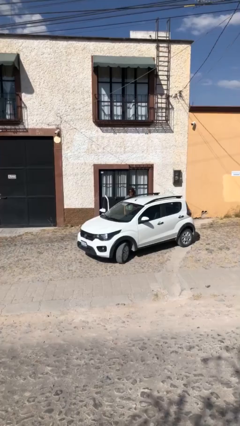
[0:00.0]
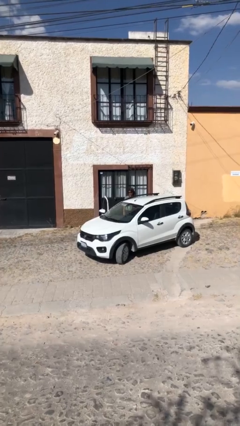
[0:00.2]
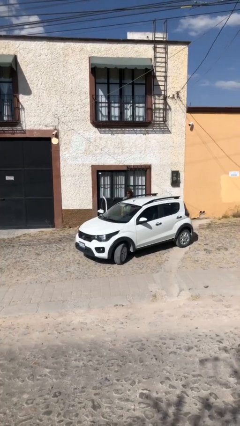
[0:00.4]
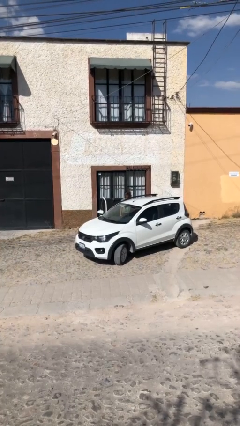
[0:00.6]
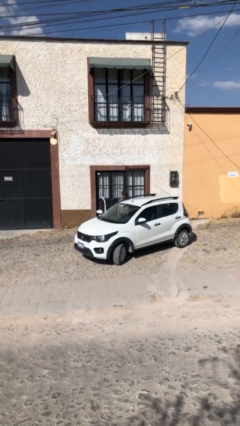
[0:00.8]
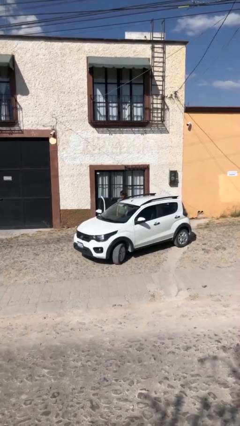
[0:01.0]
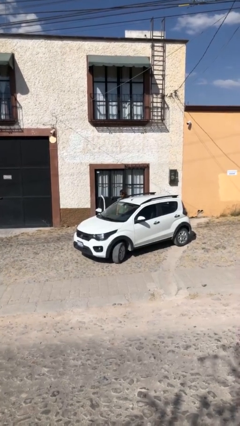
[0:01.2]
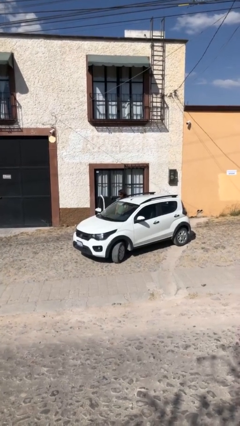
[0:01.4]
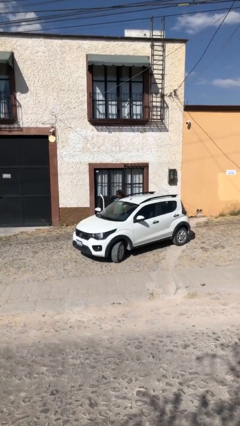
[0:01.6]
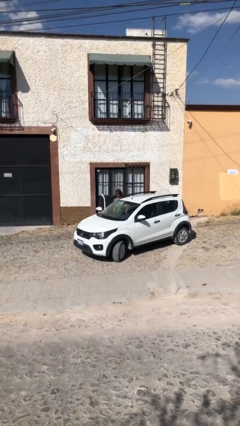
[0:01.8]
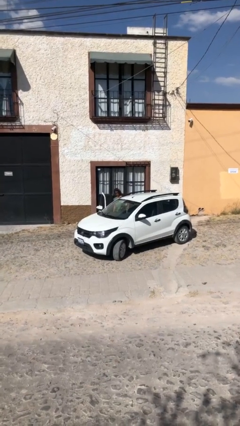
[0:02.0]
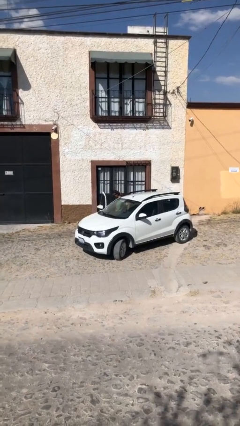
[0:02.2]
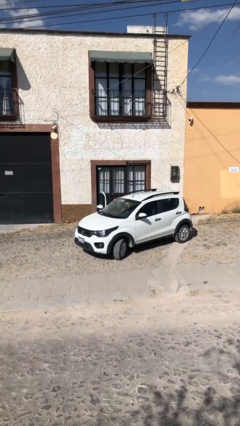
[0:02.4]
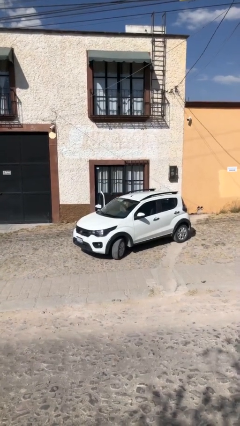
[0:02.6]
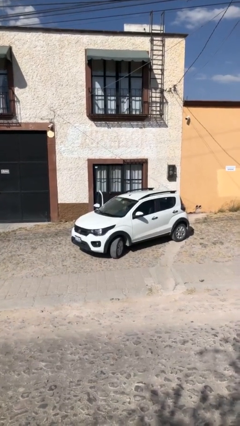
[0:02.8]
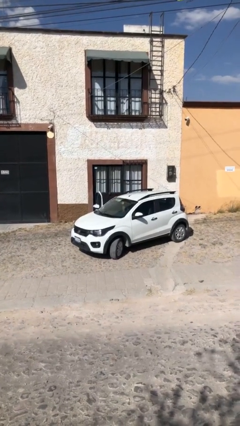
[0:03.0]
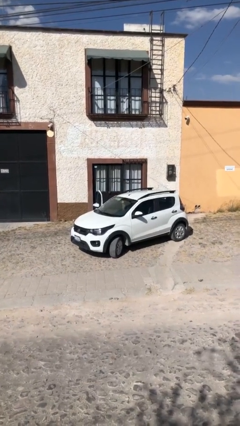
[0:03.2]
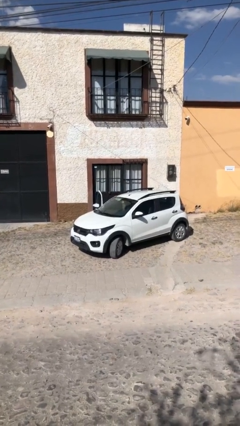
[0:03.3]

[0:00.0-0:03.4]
person enters car

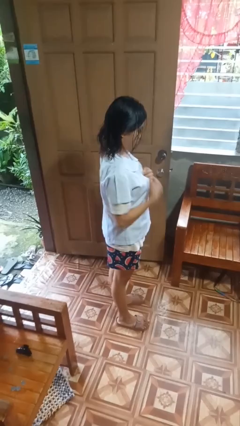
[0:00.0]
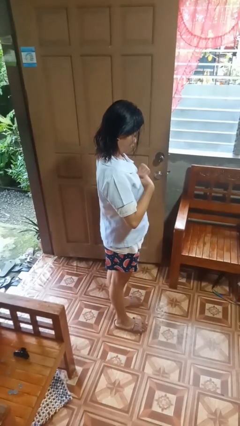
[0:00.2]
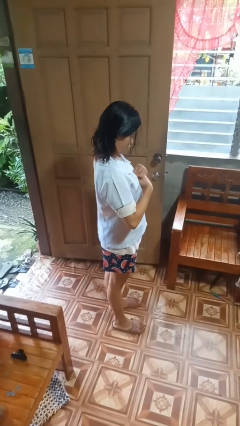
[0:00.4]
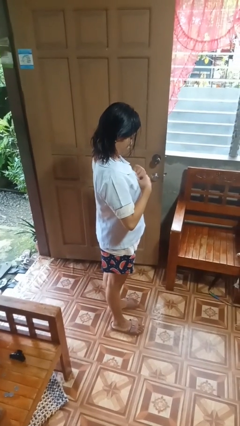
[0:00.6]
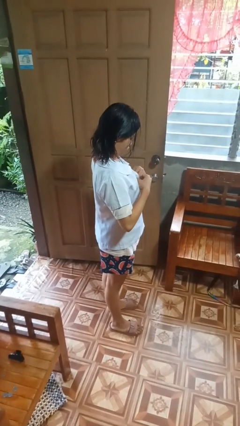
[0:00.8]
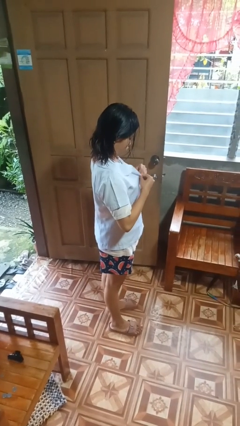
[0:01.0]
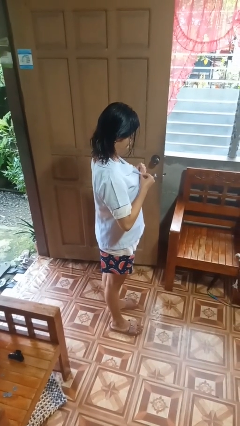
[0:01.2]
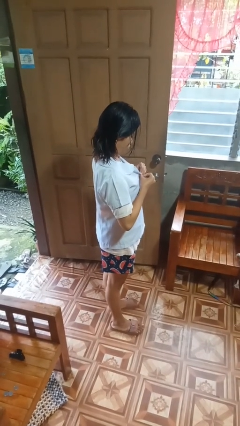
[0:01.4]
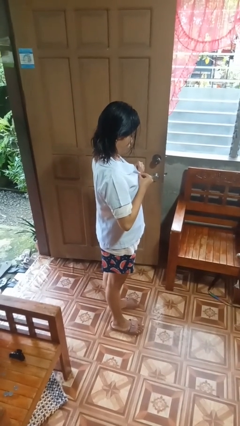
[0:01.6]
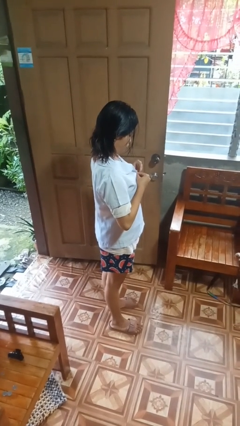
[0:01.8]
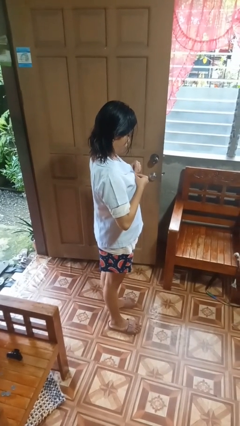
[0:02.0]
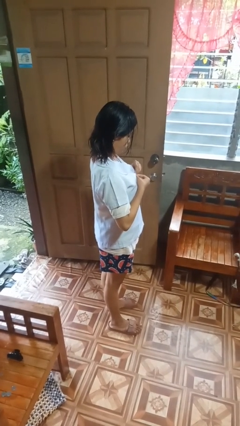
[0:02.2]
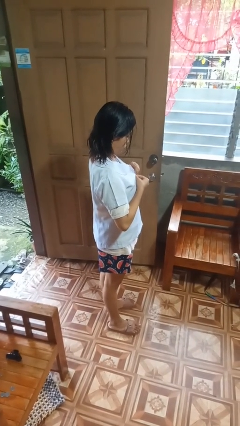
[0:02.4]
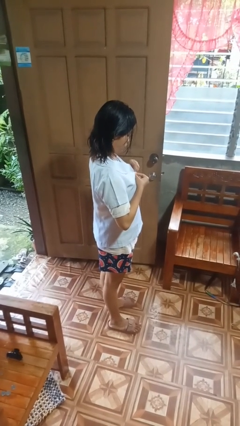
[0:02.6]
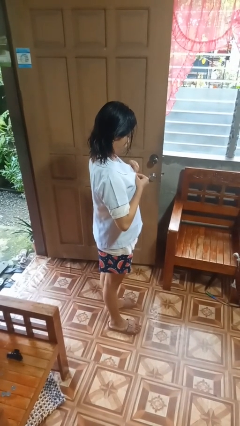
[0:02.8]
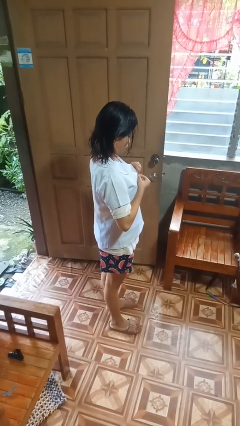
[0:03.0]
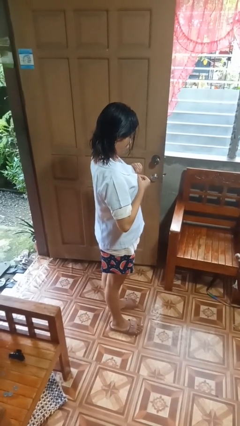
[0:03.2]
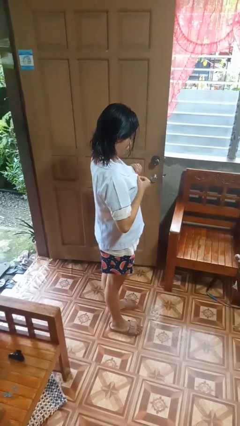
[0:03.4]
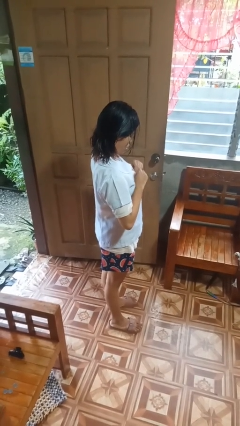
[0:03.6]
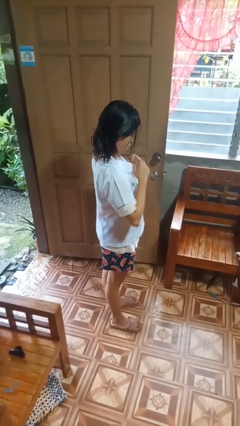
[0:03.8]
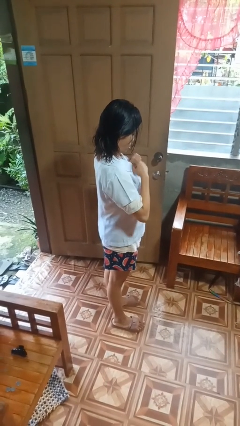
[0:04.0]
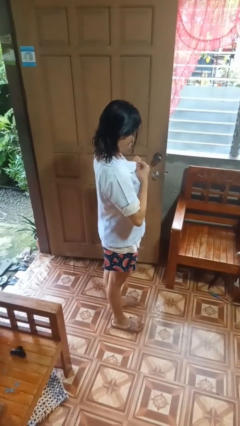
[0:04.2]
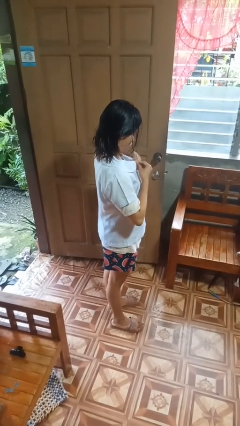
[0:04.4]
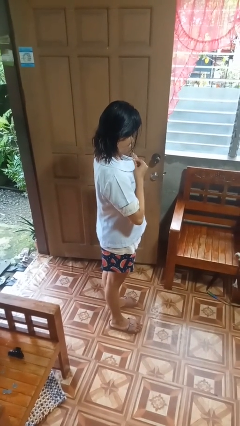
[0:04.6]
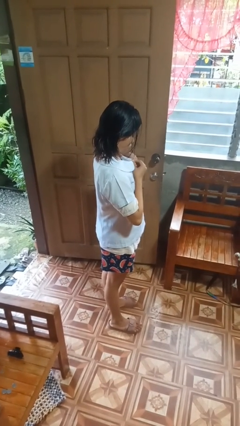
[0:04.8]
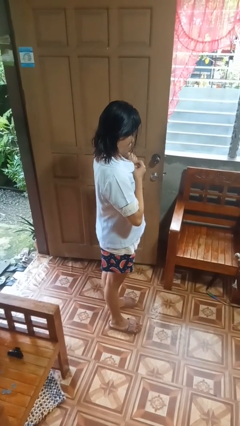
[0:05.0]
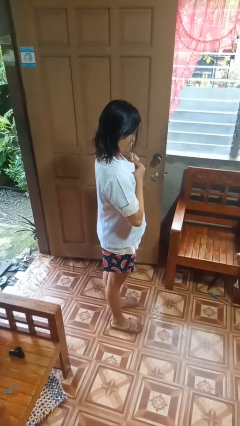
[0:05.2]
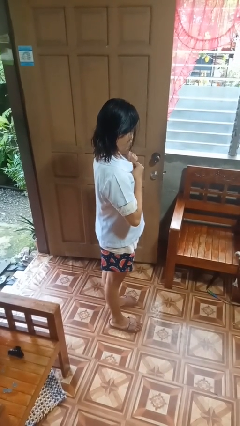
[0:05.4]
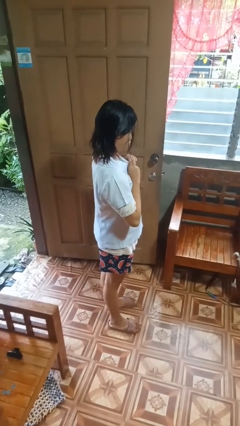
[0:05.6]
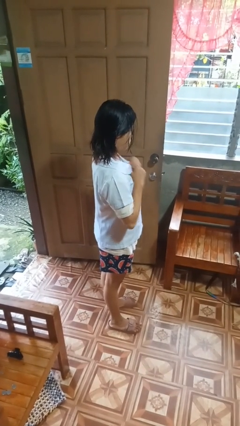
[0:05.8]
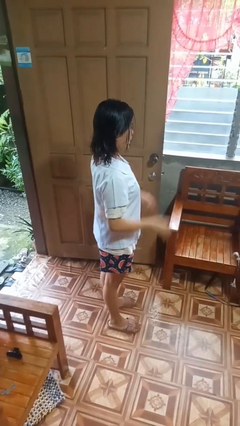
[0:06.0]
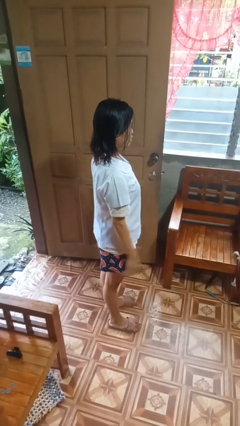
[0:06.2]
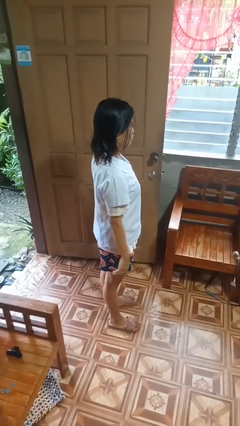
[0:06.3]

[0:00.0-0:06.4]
person buttons shirt

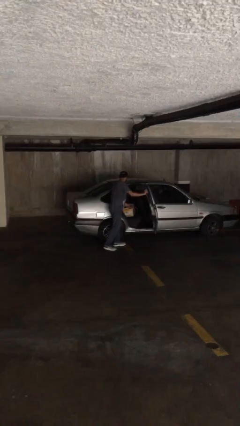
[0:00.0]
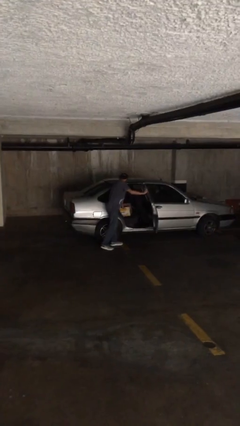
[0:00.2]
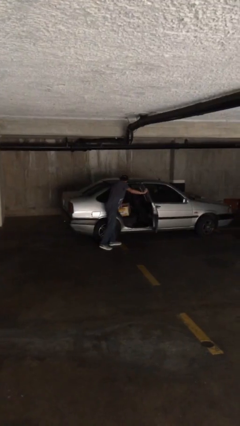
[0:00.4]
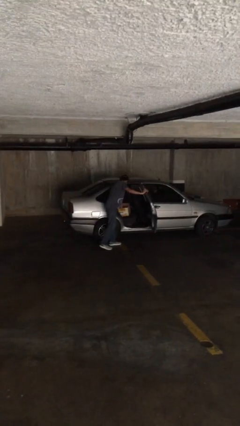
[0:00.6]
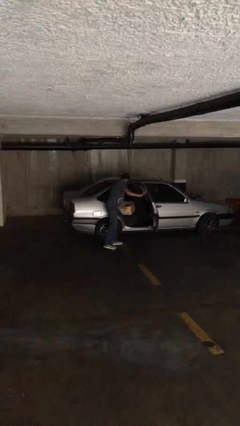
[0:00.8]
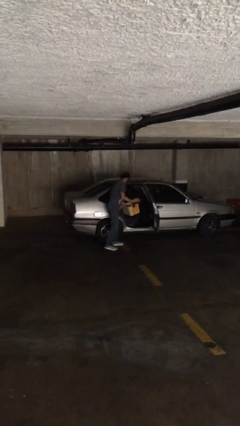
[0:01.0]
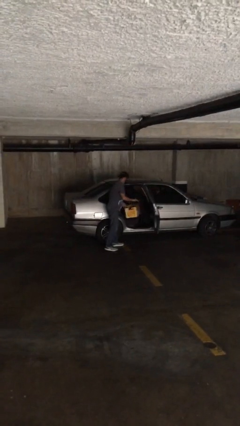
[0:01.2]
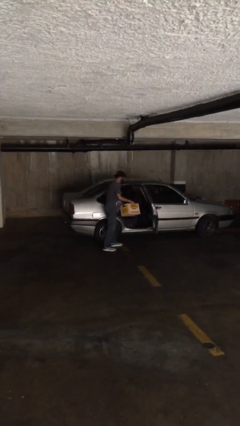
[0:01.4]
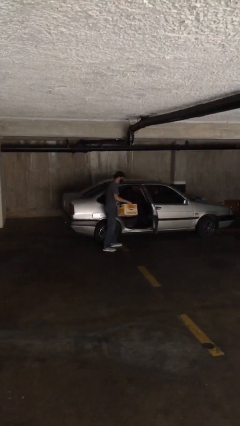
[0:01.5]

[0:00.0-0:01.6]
person unloads car

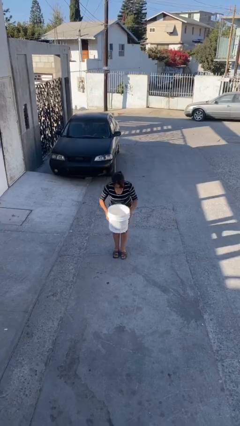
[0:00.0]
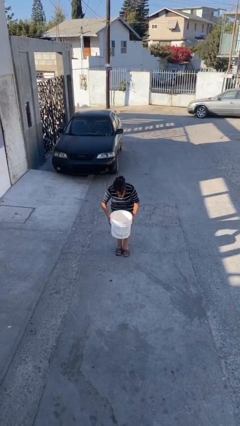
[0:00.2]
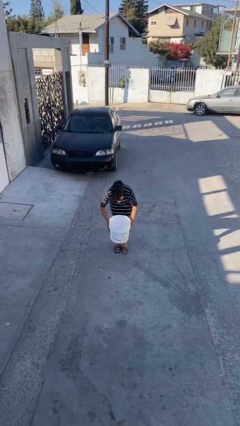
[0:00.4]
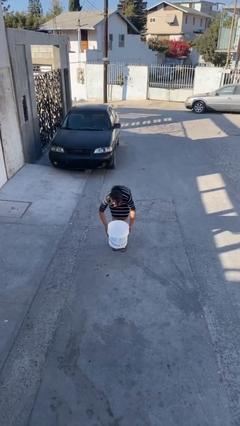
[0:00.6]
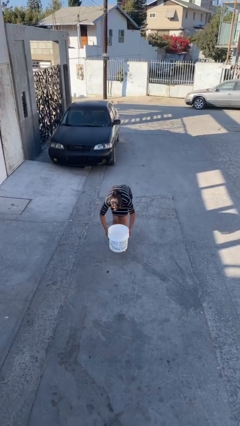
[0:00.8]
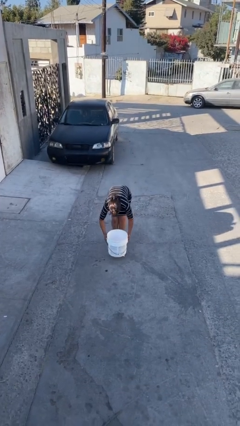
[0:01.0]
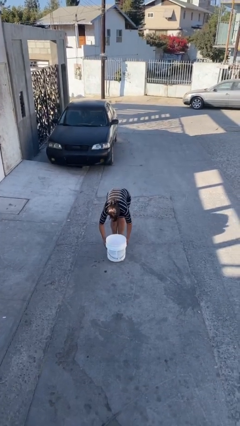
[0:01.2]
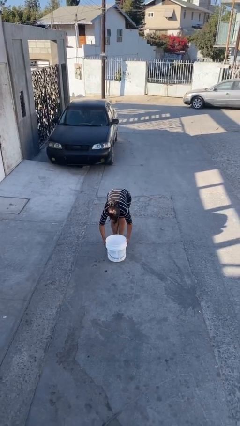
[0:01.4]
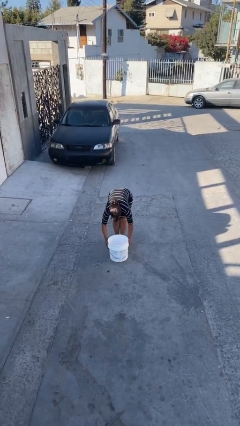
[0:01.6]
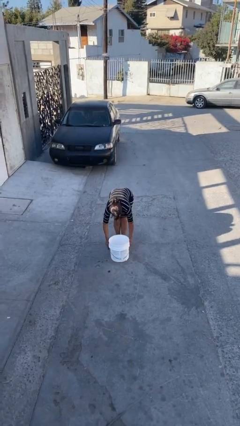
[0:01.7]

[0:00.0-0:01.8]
person puts down object on floor

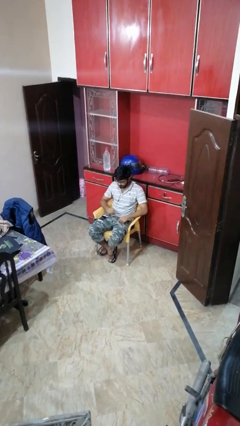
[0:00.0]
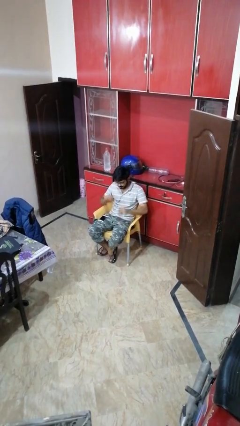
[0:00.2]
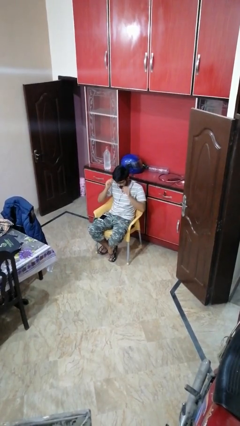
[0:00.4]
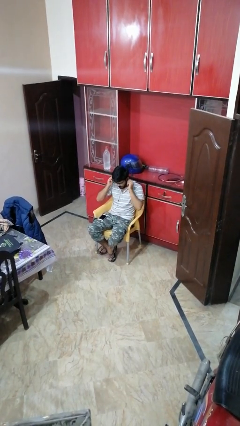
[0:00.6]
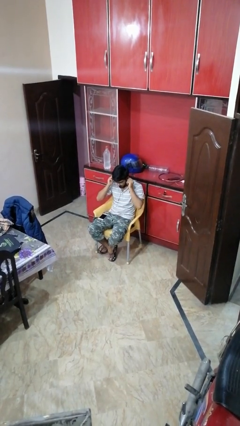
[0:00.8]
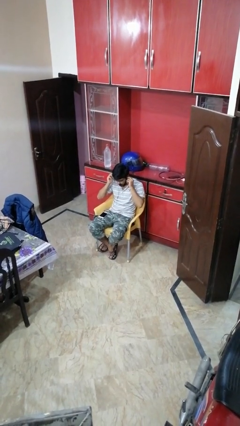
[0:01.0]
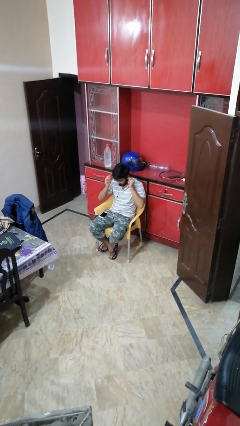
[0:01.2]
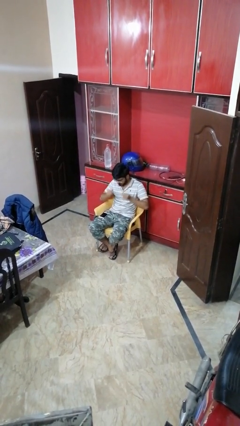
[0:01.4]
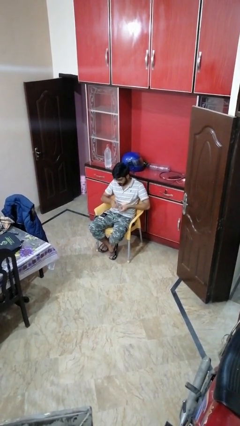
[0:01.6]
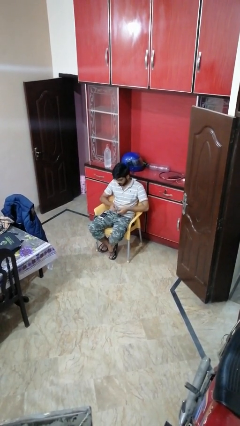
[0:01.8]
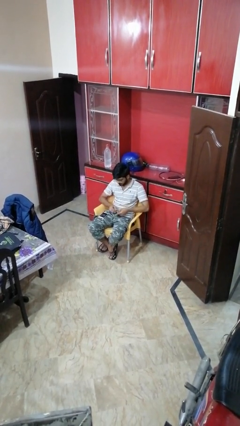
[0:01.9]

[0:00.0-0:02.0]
person takes off headphones

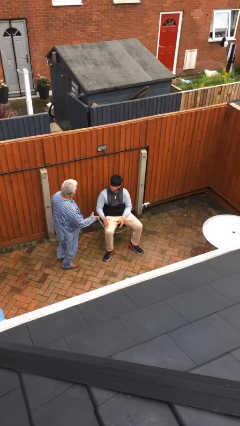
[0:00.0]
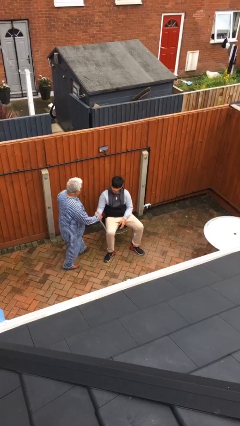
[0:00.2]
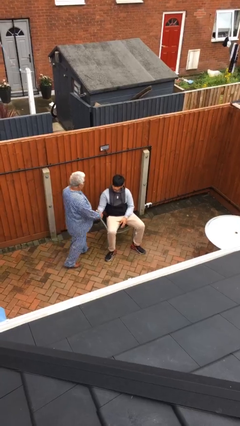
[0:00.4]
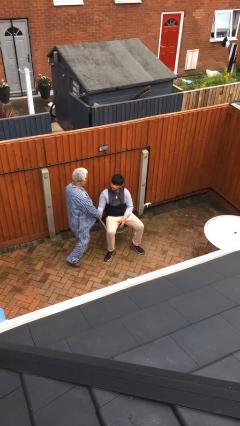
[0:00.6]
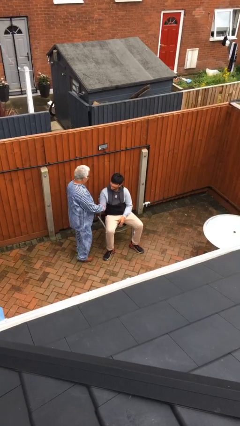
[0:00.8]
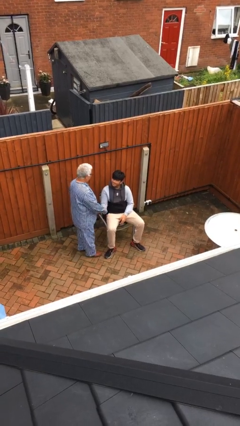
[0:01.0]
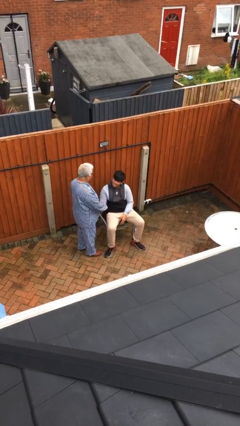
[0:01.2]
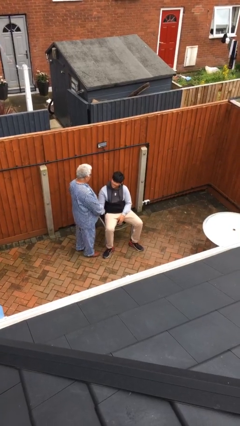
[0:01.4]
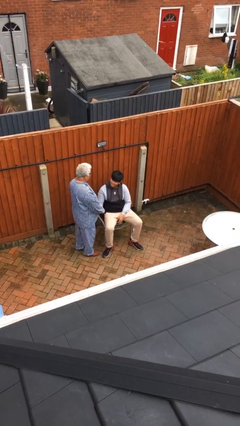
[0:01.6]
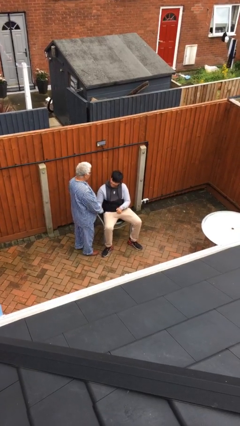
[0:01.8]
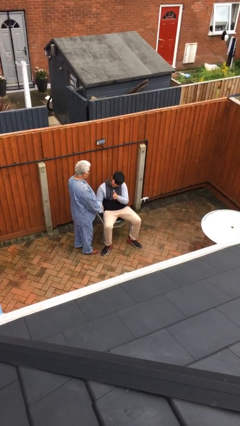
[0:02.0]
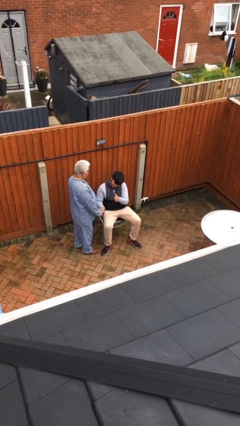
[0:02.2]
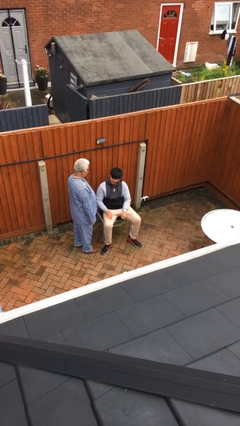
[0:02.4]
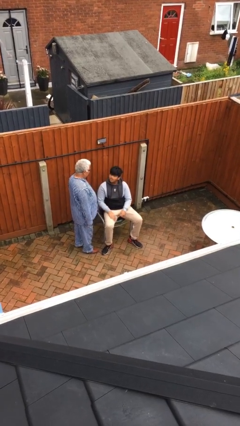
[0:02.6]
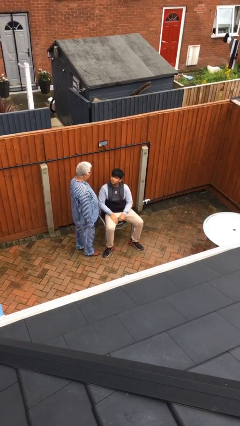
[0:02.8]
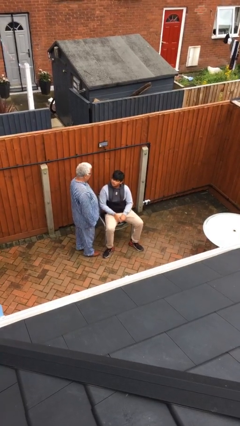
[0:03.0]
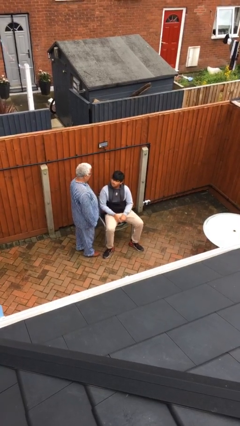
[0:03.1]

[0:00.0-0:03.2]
person shakes hand
